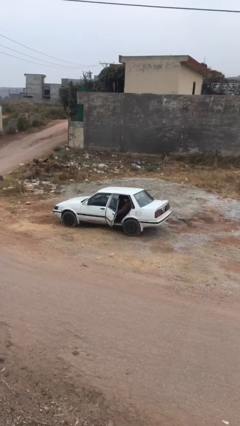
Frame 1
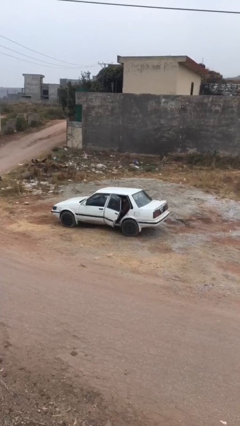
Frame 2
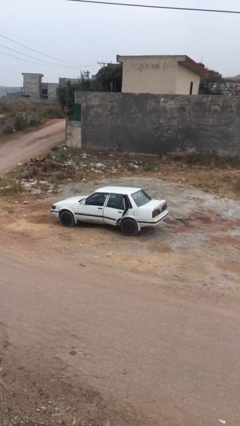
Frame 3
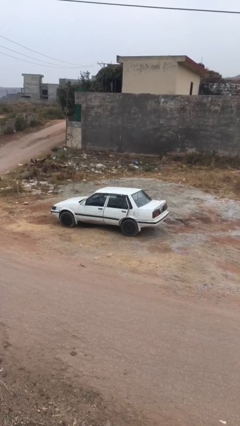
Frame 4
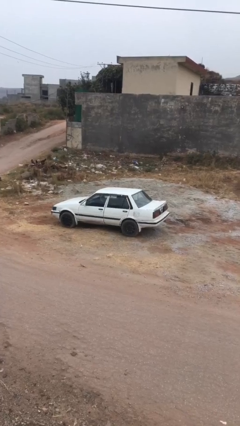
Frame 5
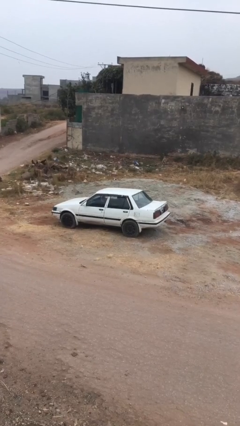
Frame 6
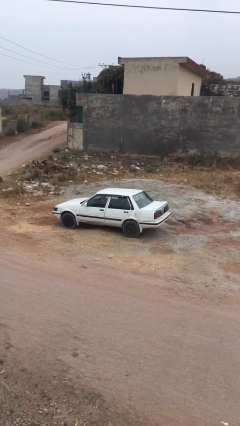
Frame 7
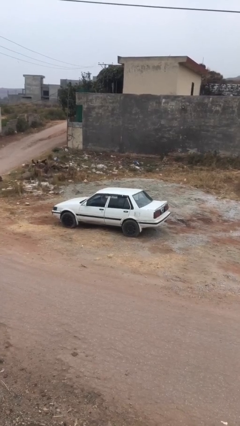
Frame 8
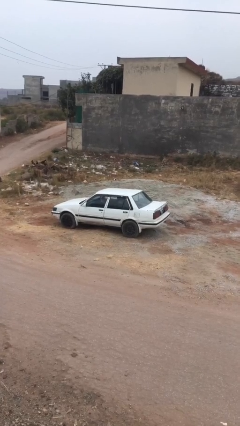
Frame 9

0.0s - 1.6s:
person closes car door

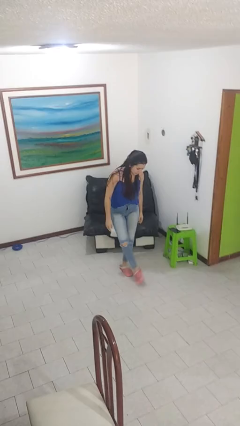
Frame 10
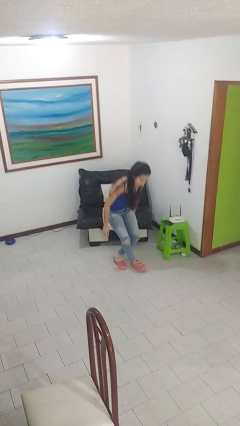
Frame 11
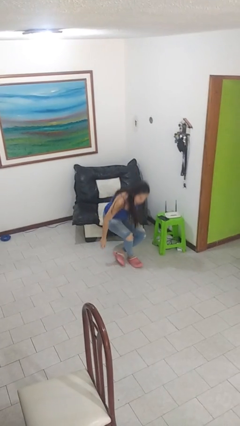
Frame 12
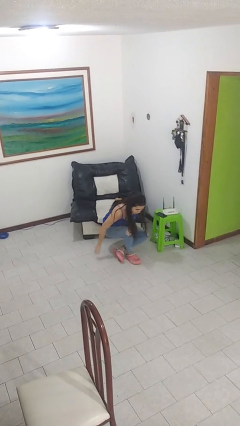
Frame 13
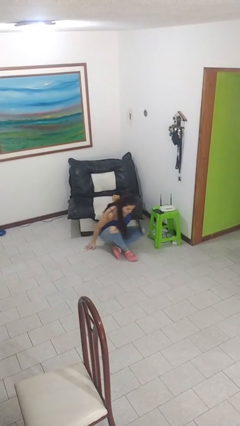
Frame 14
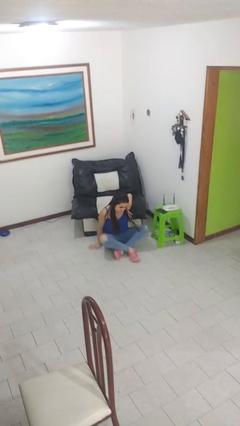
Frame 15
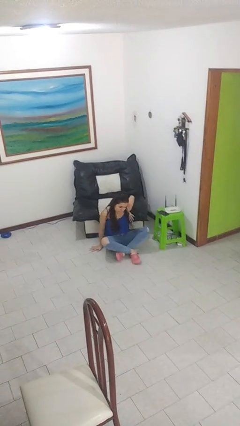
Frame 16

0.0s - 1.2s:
person sits crisscross

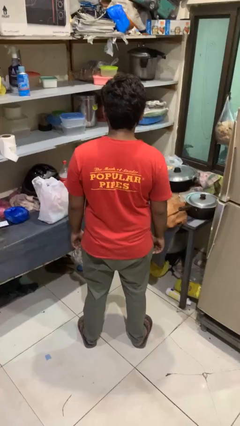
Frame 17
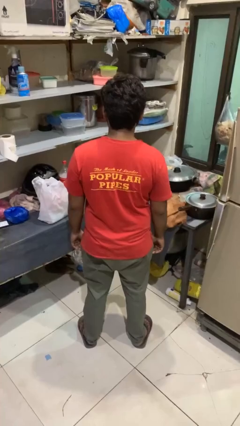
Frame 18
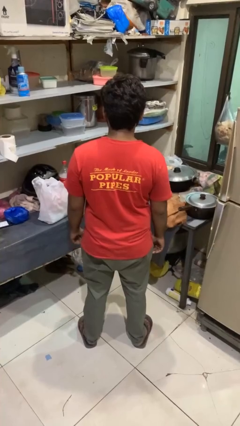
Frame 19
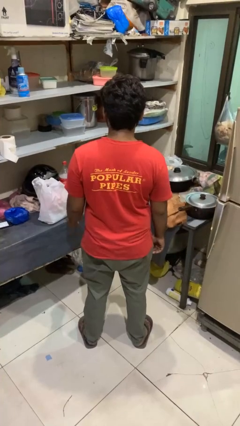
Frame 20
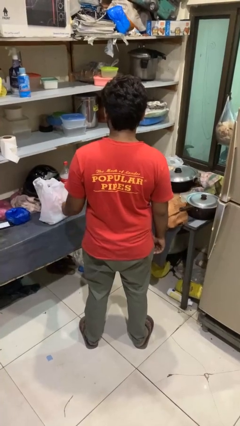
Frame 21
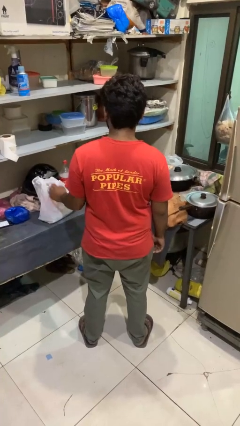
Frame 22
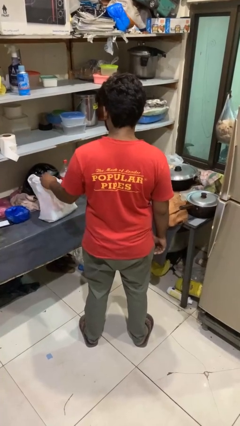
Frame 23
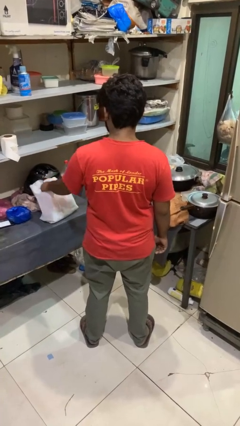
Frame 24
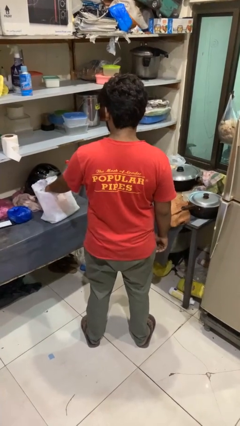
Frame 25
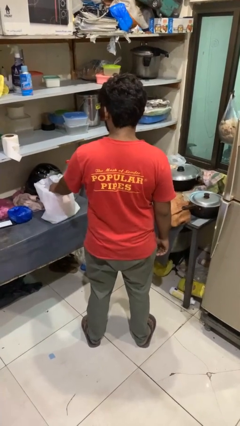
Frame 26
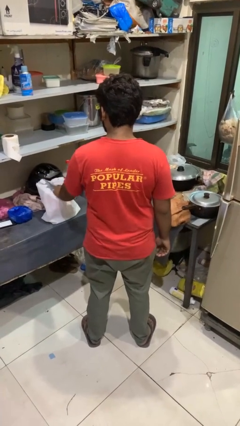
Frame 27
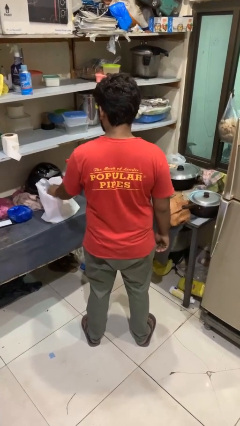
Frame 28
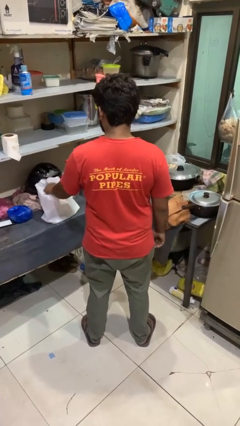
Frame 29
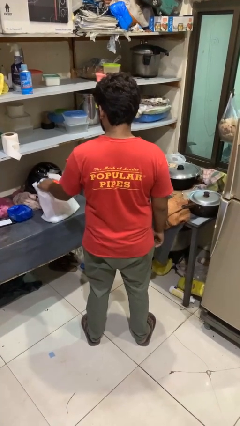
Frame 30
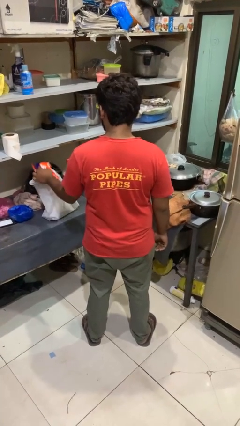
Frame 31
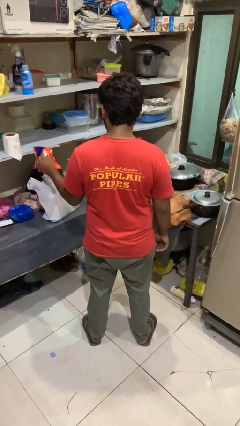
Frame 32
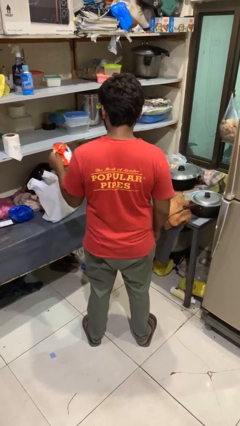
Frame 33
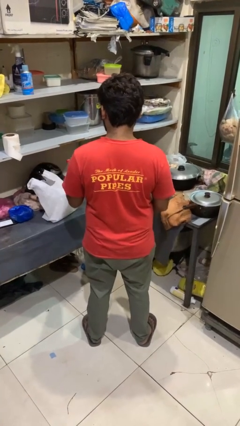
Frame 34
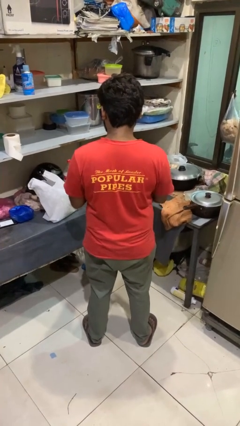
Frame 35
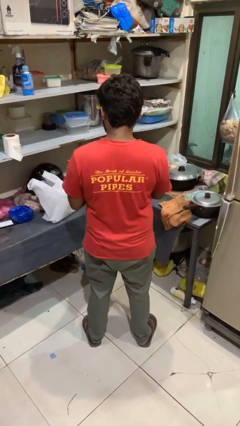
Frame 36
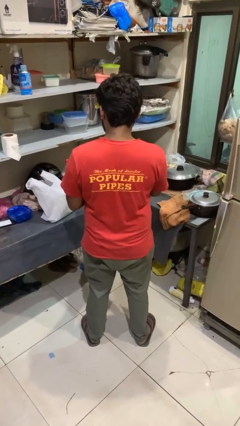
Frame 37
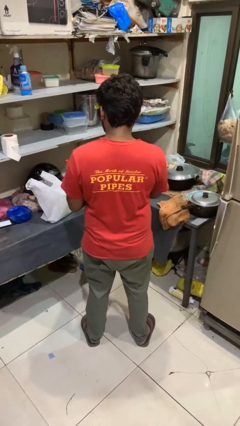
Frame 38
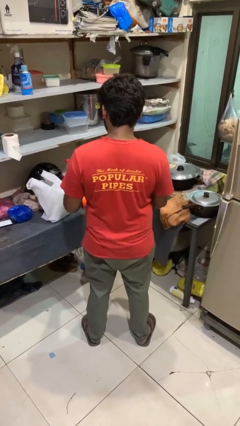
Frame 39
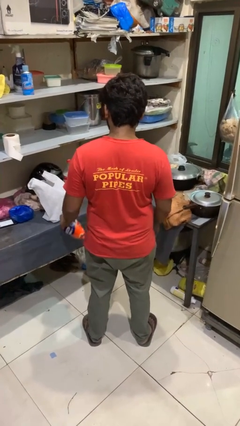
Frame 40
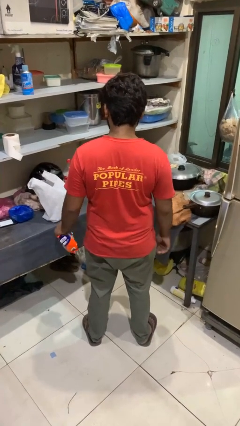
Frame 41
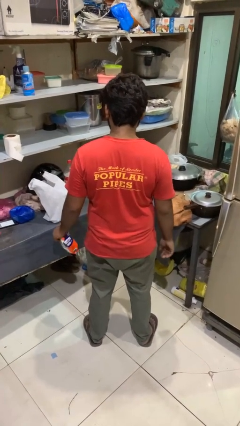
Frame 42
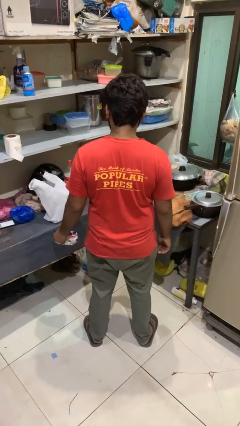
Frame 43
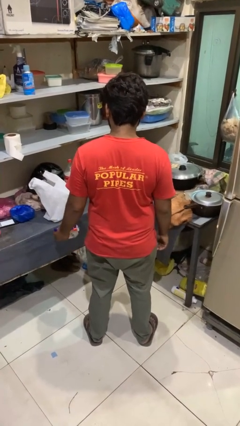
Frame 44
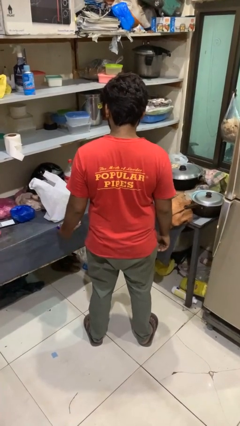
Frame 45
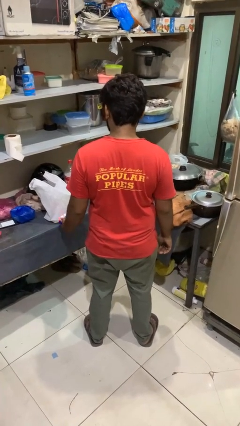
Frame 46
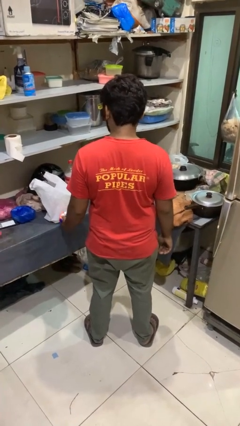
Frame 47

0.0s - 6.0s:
person takes object from bag

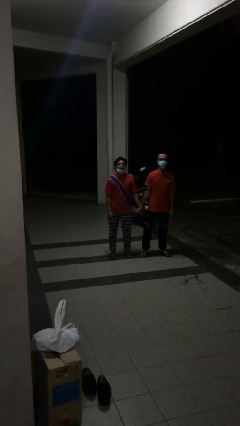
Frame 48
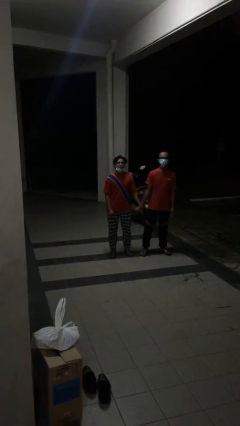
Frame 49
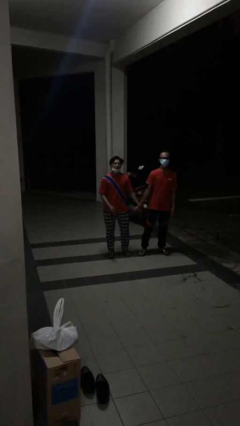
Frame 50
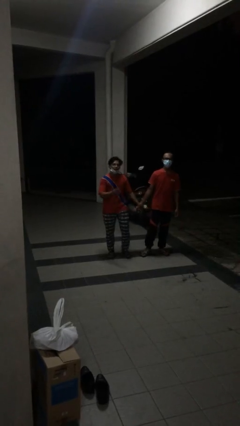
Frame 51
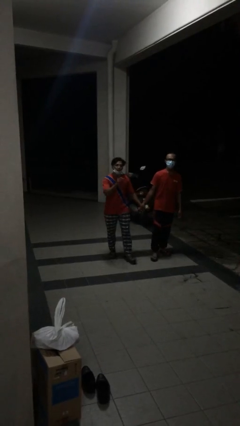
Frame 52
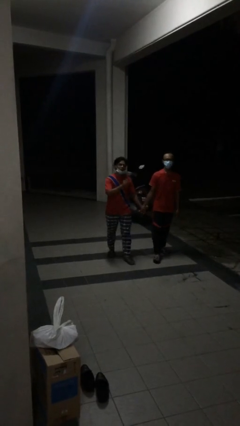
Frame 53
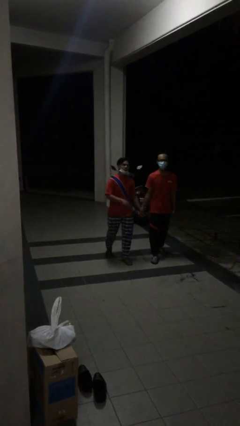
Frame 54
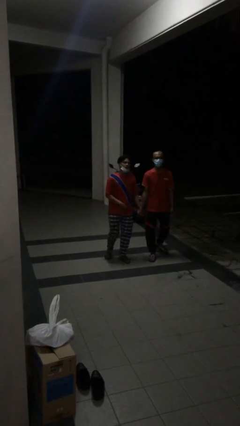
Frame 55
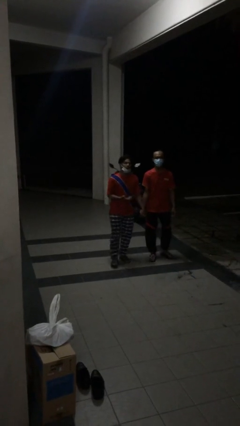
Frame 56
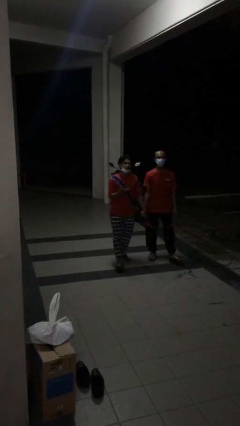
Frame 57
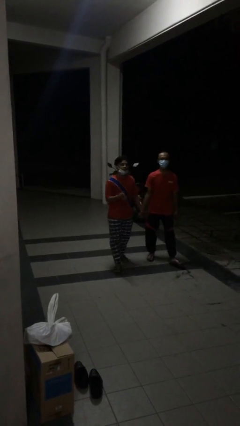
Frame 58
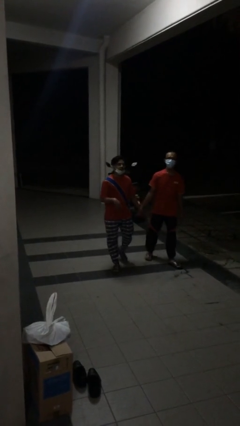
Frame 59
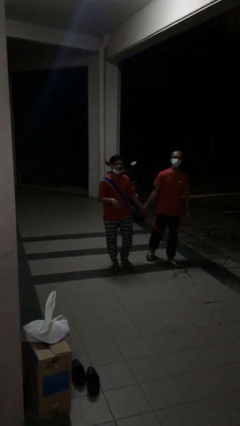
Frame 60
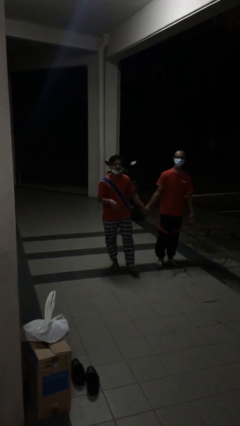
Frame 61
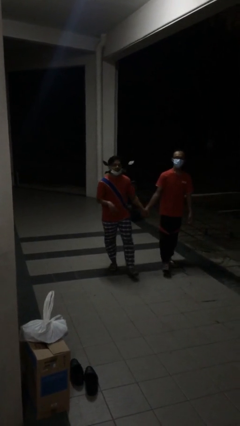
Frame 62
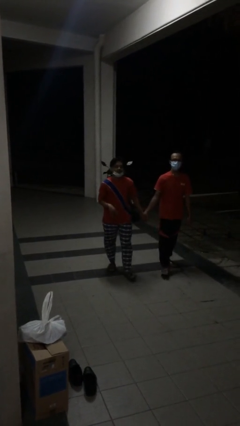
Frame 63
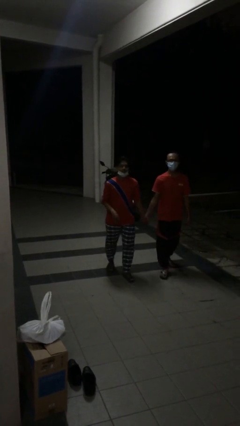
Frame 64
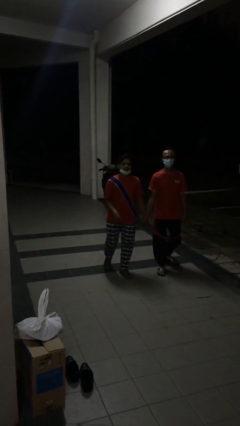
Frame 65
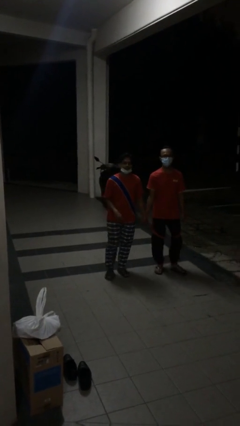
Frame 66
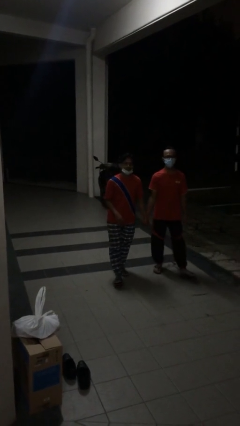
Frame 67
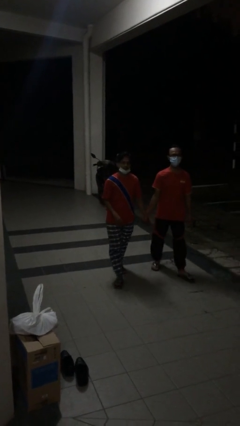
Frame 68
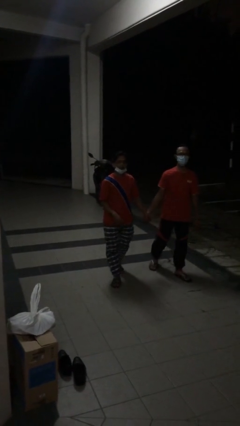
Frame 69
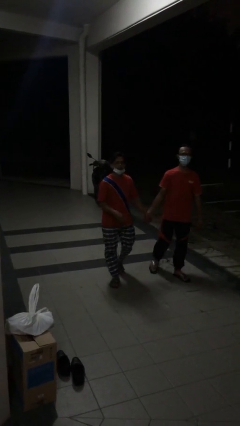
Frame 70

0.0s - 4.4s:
person holds hand

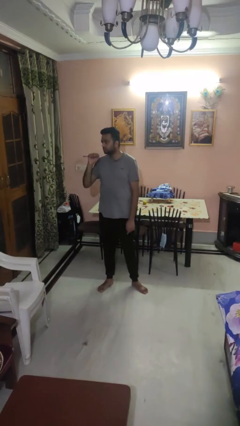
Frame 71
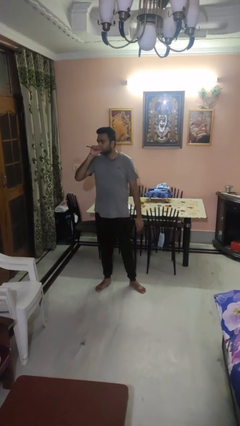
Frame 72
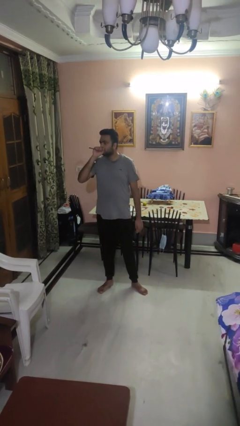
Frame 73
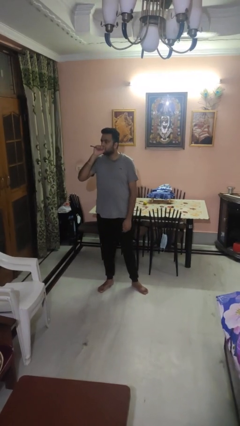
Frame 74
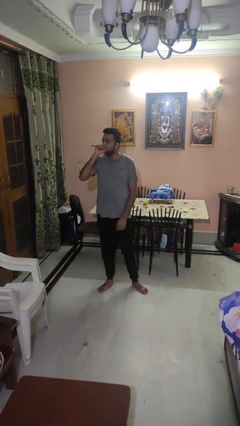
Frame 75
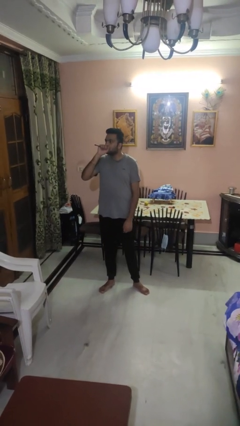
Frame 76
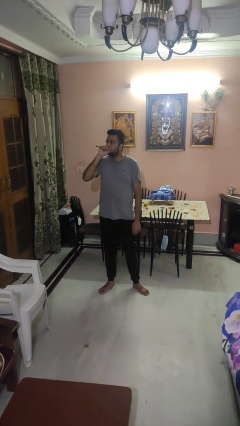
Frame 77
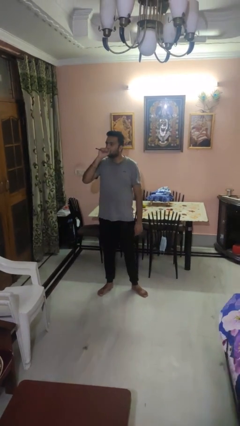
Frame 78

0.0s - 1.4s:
person vapes

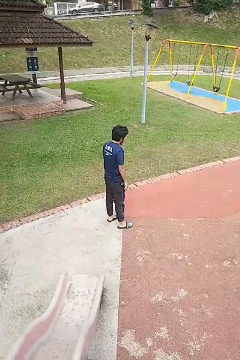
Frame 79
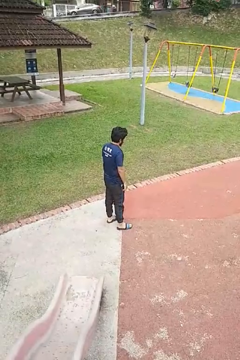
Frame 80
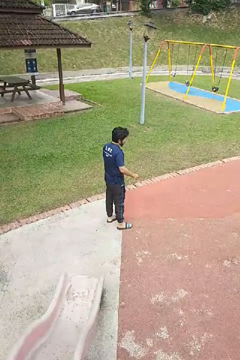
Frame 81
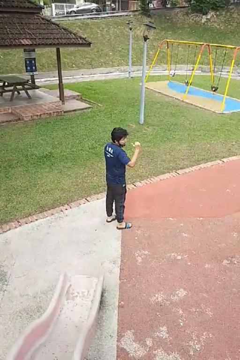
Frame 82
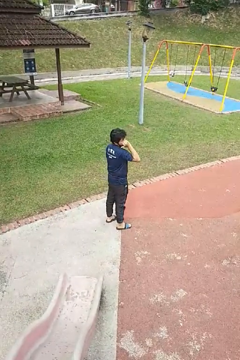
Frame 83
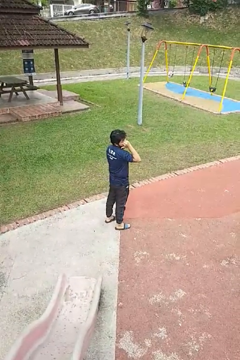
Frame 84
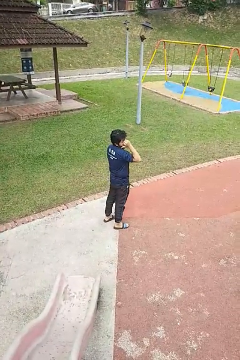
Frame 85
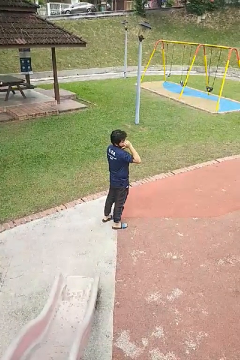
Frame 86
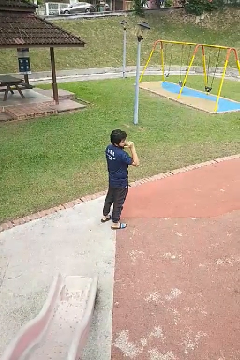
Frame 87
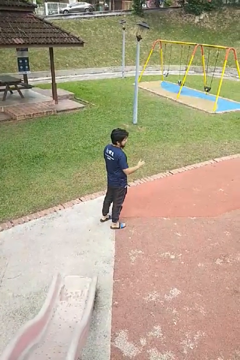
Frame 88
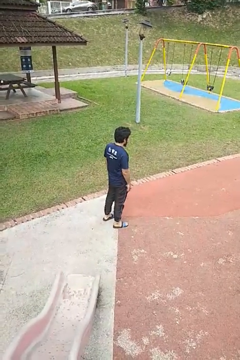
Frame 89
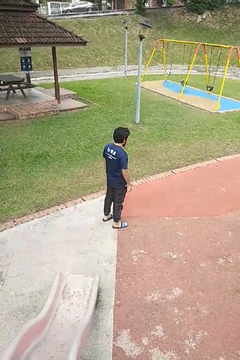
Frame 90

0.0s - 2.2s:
person gestures behind me

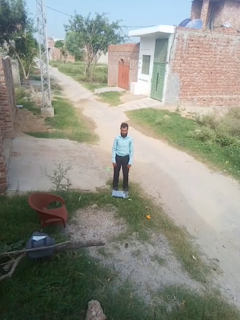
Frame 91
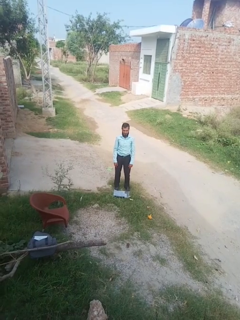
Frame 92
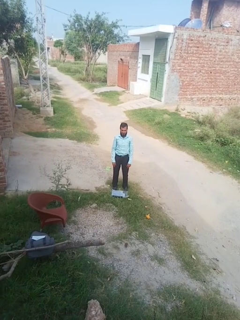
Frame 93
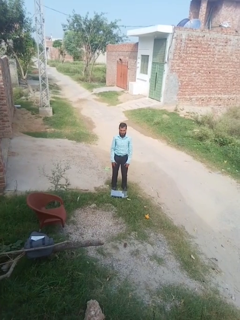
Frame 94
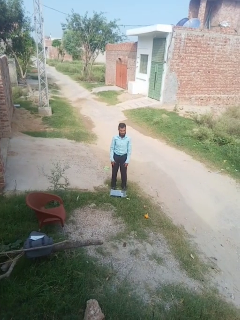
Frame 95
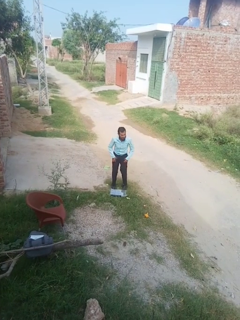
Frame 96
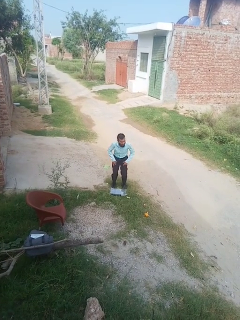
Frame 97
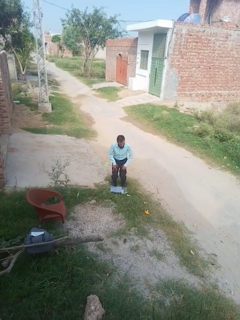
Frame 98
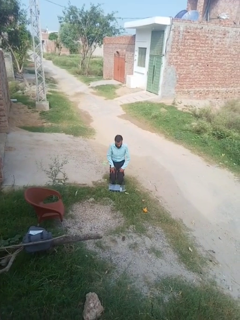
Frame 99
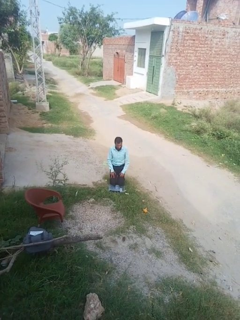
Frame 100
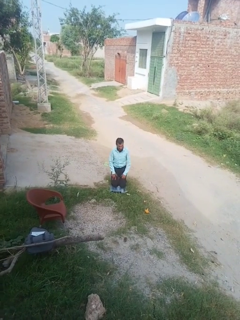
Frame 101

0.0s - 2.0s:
person kneels
